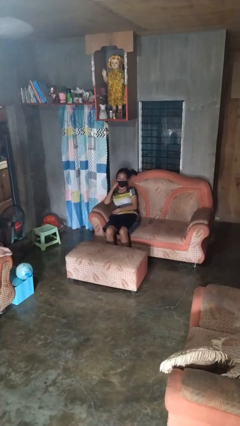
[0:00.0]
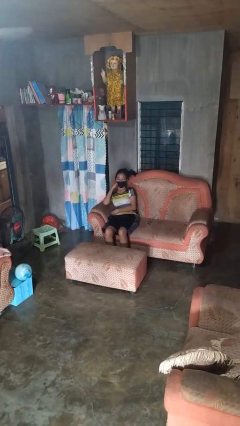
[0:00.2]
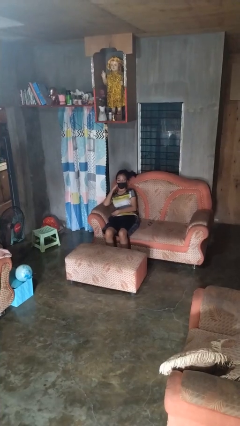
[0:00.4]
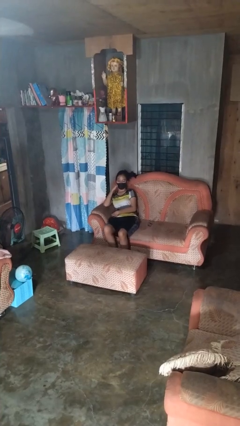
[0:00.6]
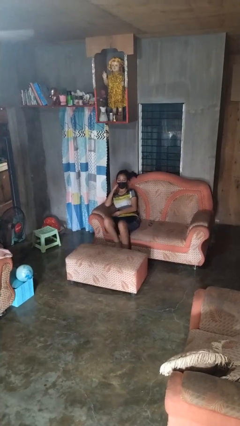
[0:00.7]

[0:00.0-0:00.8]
person puts feet up

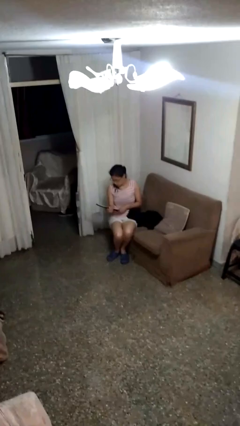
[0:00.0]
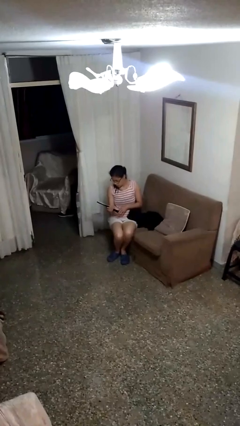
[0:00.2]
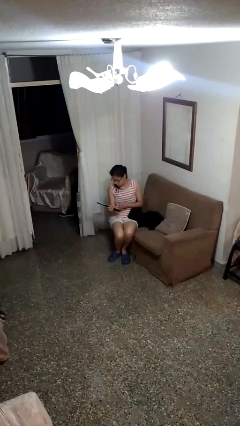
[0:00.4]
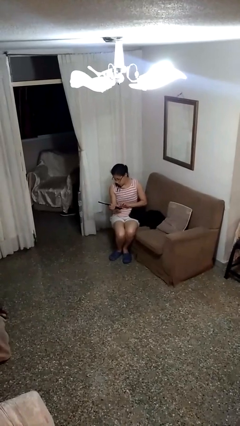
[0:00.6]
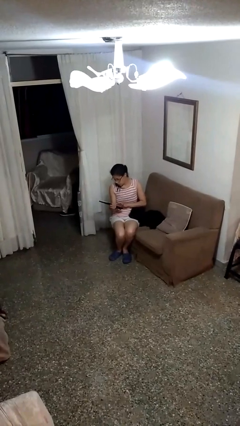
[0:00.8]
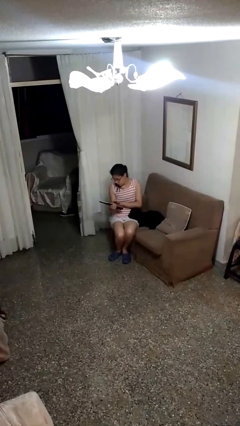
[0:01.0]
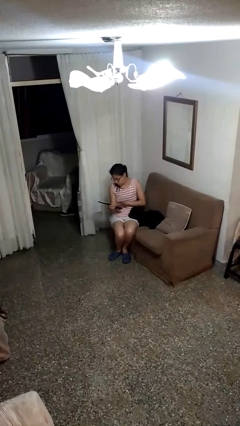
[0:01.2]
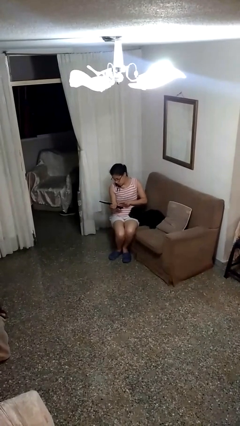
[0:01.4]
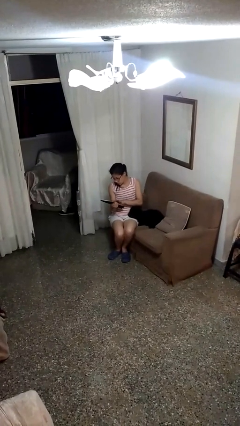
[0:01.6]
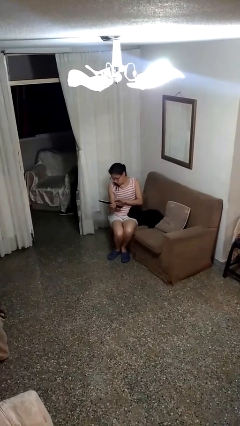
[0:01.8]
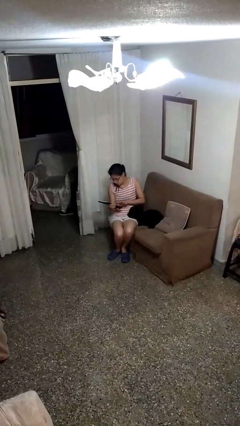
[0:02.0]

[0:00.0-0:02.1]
person interacts with tablet

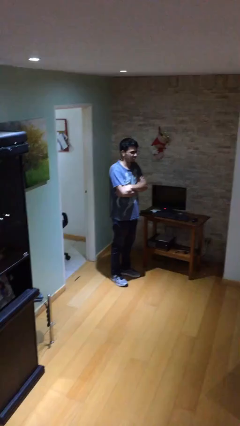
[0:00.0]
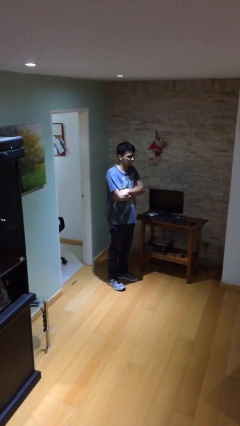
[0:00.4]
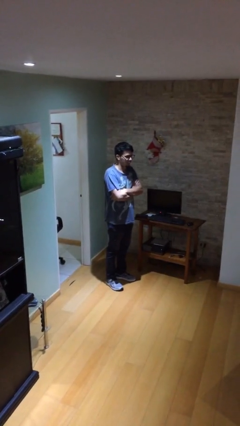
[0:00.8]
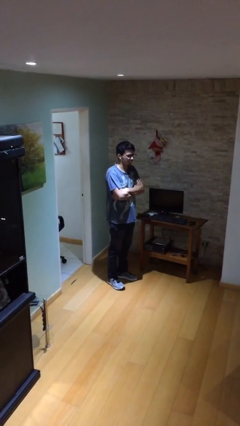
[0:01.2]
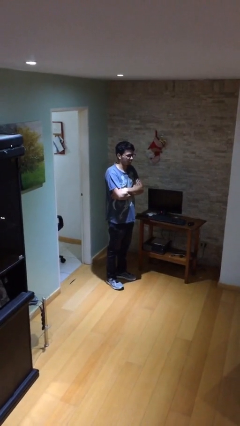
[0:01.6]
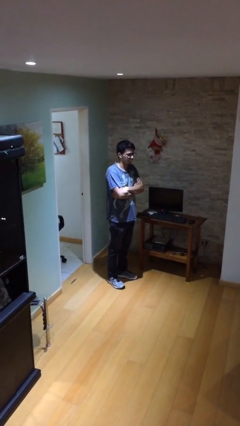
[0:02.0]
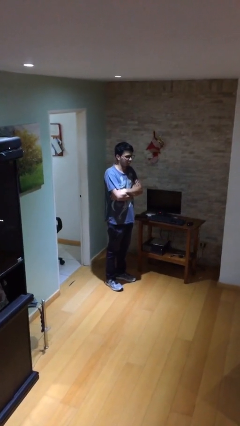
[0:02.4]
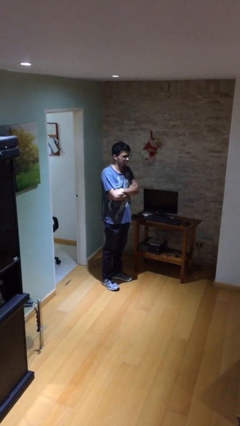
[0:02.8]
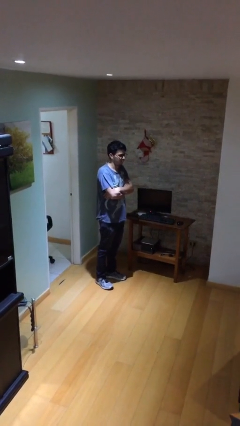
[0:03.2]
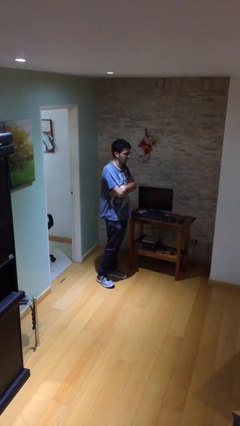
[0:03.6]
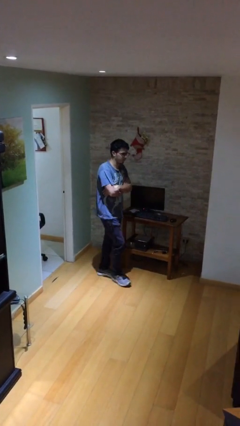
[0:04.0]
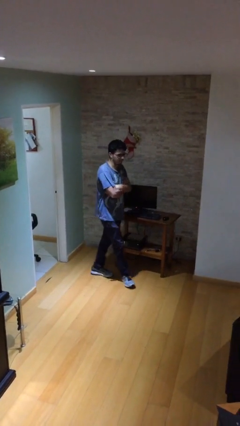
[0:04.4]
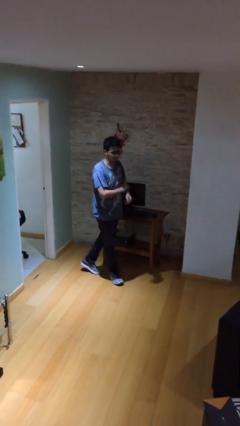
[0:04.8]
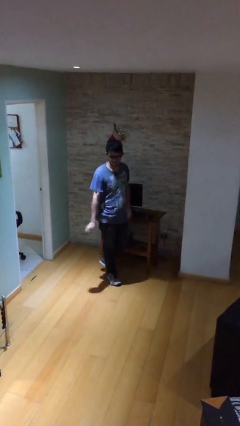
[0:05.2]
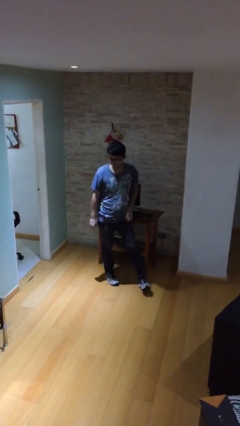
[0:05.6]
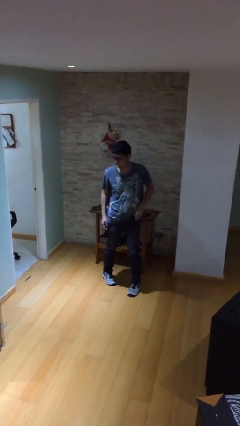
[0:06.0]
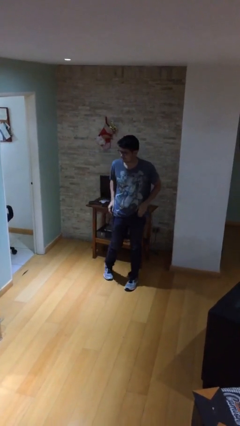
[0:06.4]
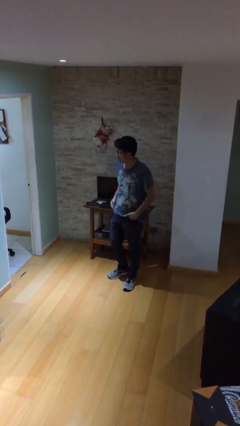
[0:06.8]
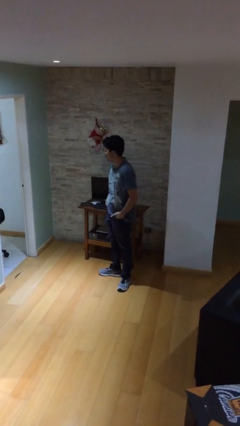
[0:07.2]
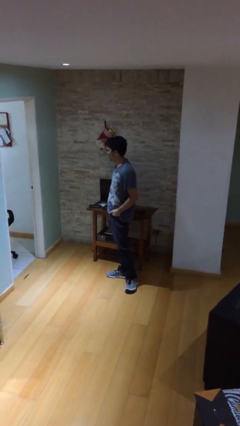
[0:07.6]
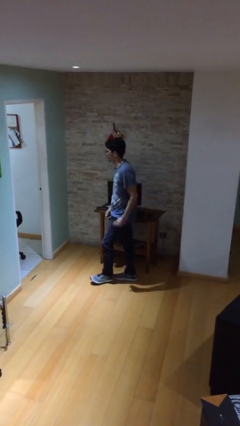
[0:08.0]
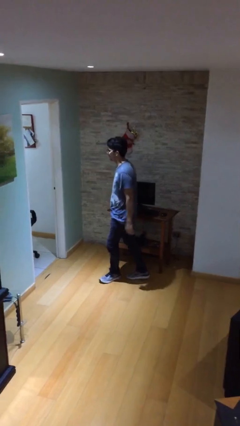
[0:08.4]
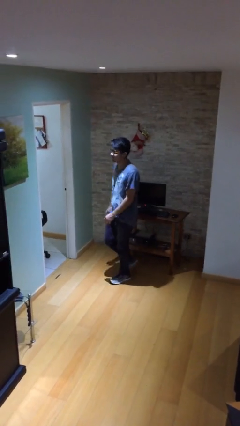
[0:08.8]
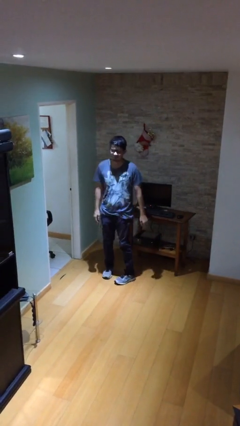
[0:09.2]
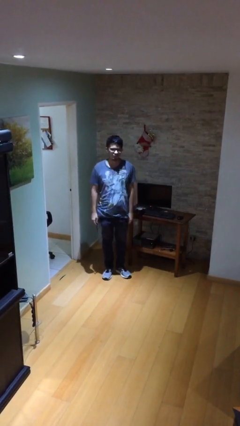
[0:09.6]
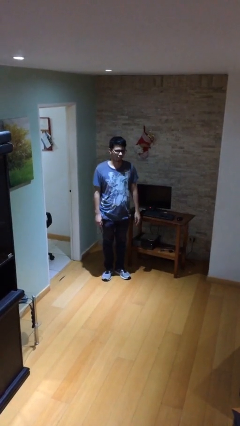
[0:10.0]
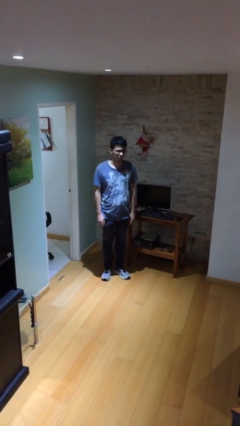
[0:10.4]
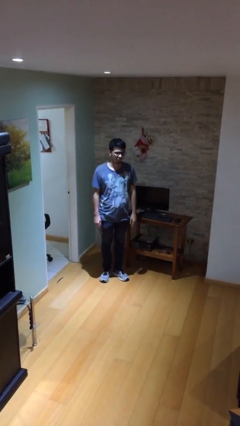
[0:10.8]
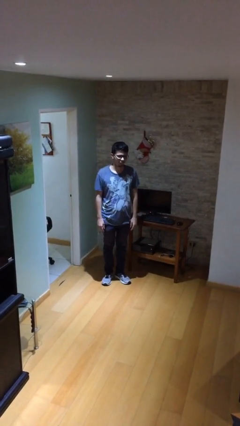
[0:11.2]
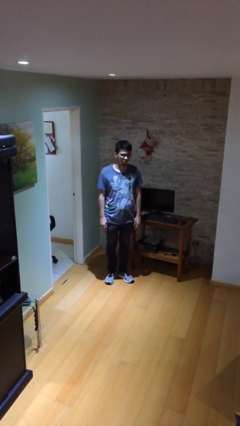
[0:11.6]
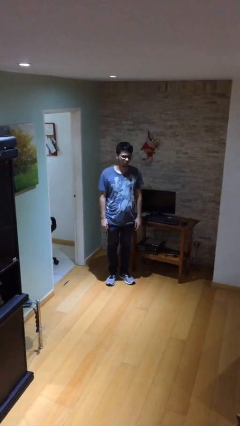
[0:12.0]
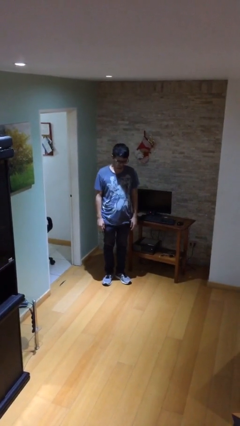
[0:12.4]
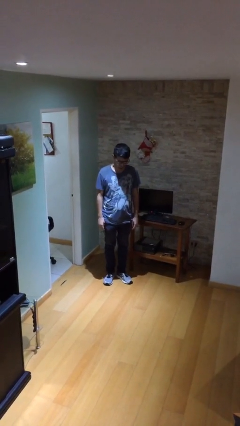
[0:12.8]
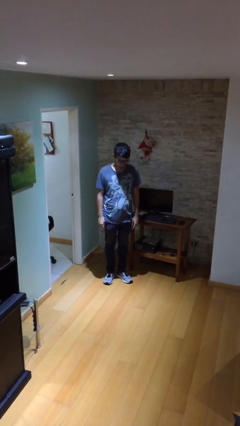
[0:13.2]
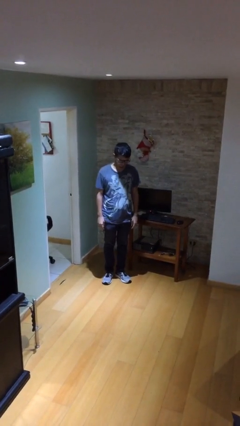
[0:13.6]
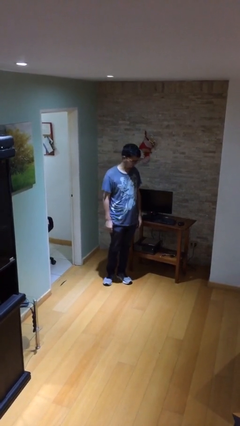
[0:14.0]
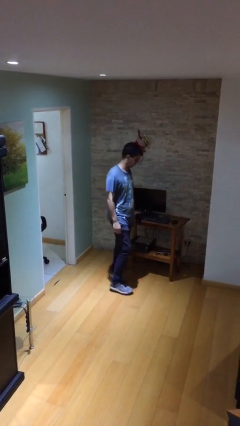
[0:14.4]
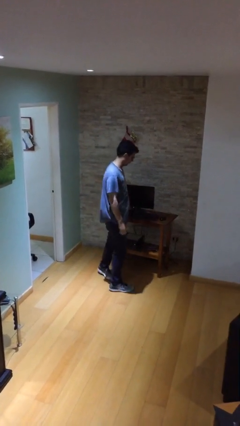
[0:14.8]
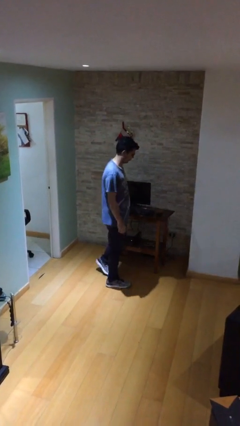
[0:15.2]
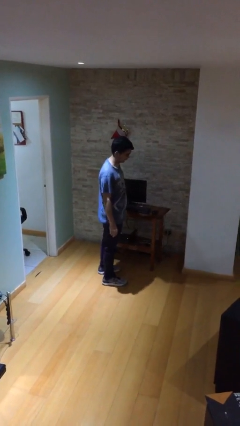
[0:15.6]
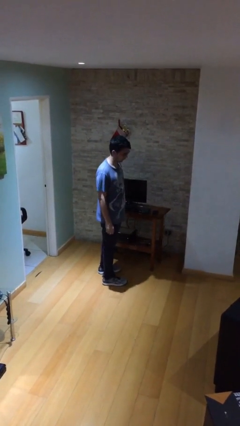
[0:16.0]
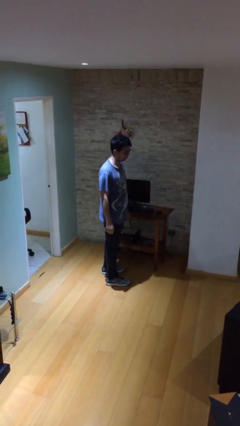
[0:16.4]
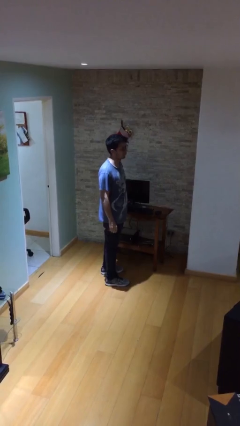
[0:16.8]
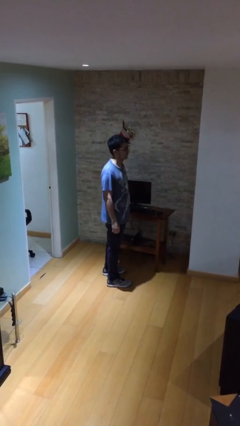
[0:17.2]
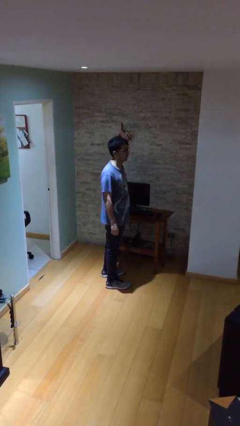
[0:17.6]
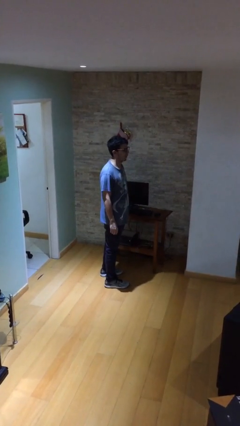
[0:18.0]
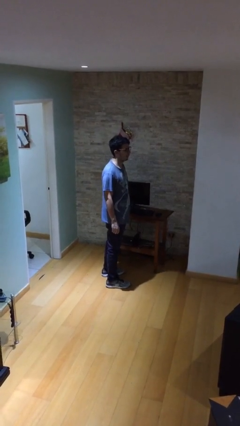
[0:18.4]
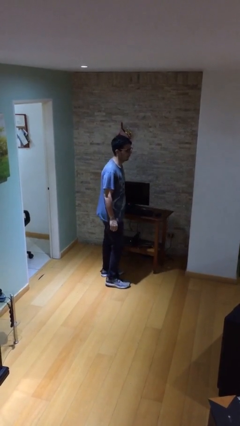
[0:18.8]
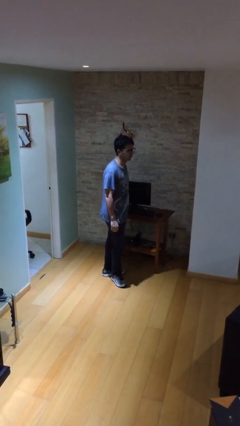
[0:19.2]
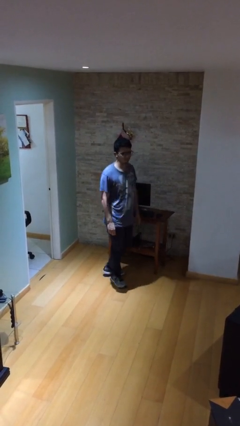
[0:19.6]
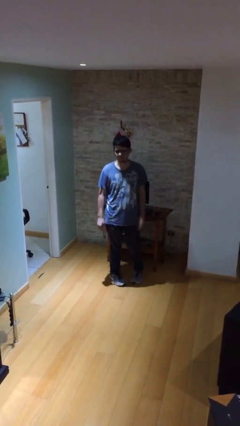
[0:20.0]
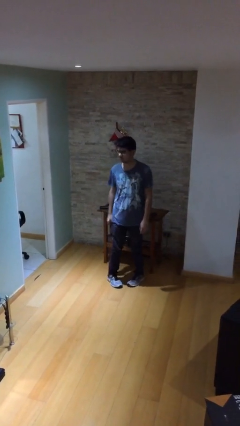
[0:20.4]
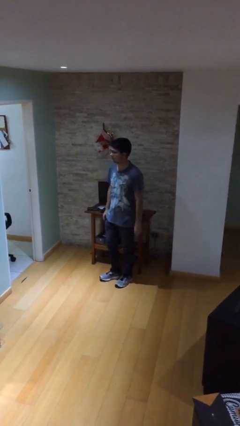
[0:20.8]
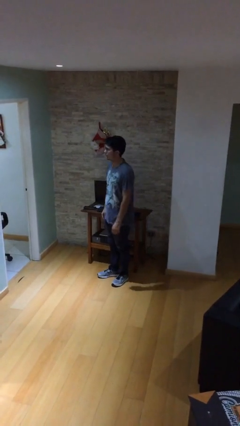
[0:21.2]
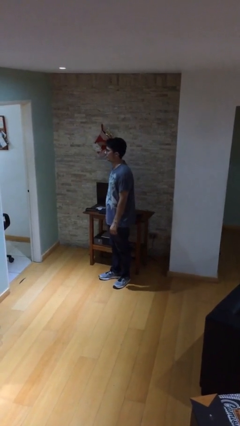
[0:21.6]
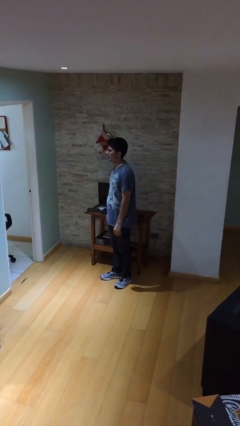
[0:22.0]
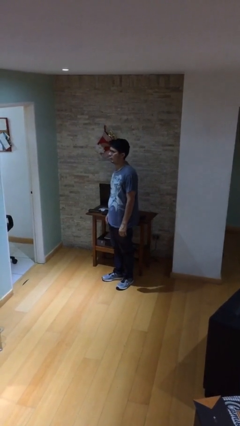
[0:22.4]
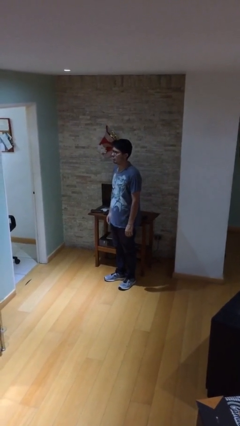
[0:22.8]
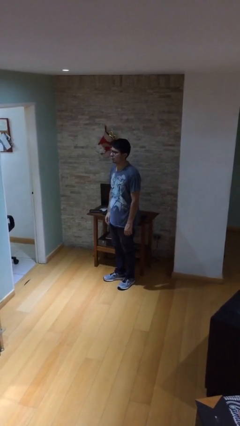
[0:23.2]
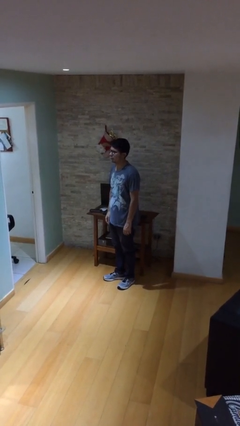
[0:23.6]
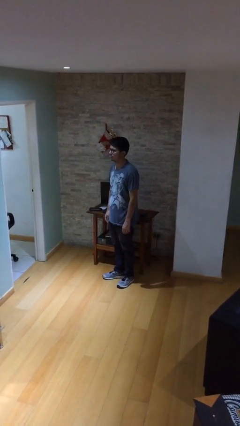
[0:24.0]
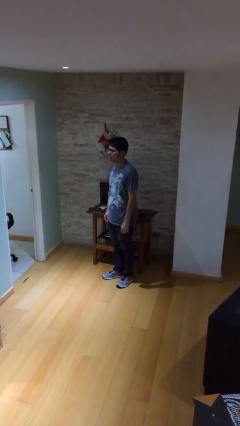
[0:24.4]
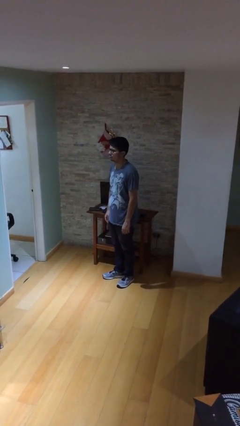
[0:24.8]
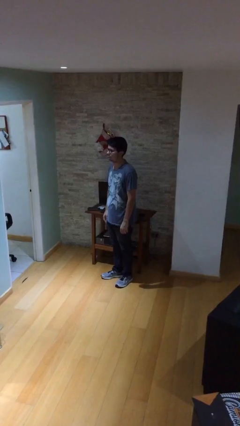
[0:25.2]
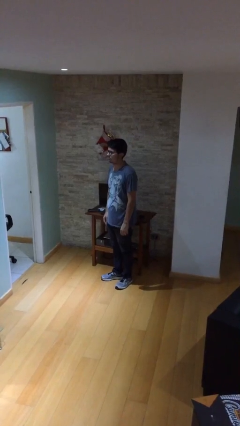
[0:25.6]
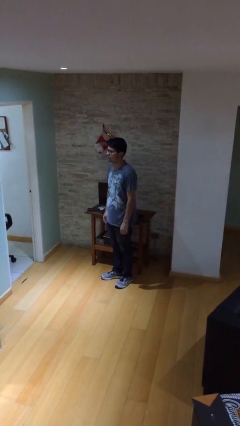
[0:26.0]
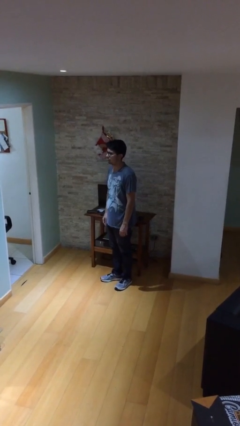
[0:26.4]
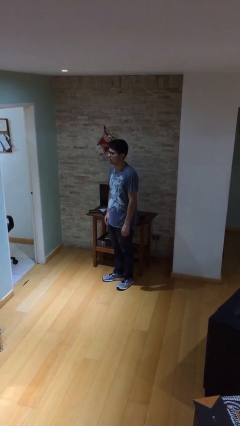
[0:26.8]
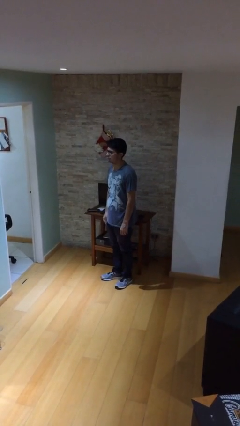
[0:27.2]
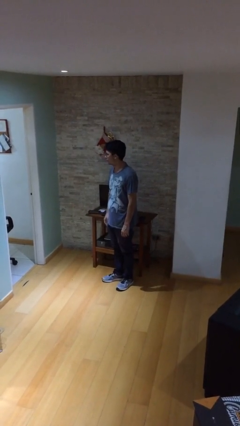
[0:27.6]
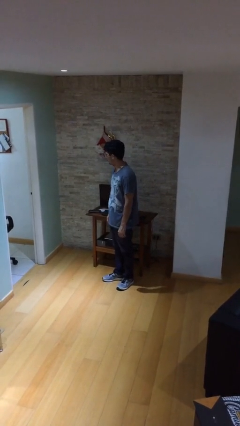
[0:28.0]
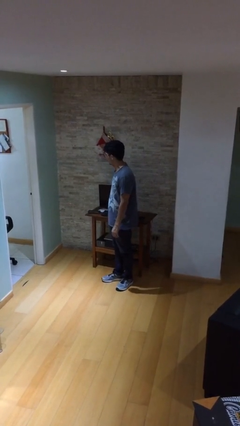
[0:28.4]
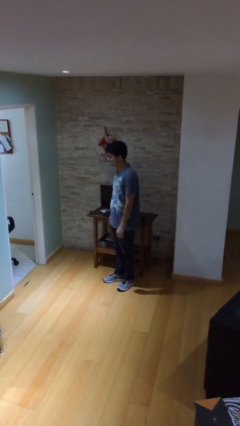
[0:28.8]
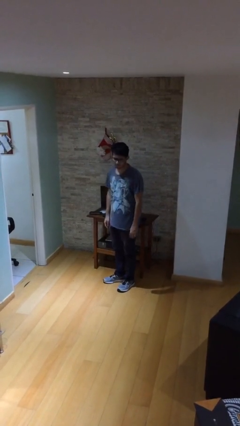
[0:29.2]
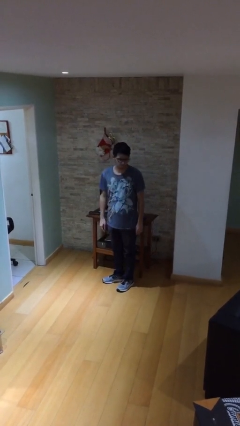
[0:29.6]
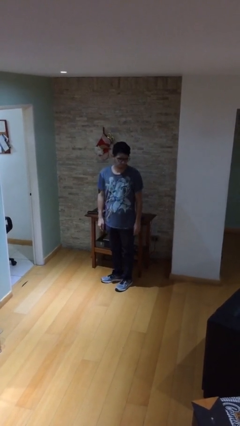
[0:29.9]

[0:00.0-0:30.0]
person walks

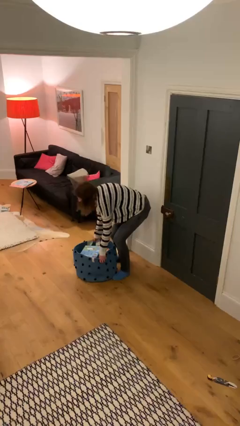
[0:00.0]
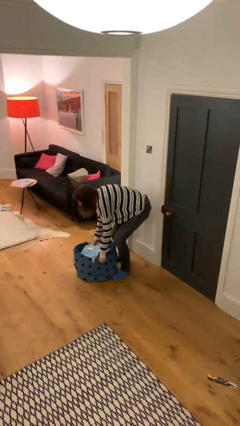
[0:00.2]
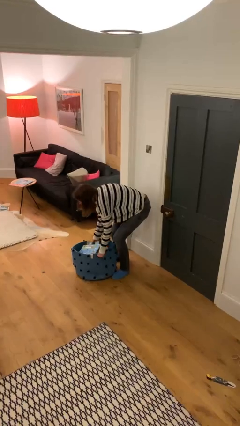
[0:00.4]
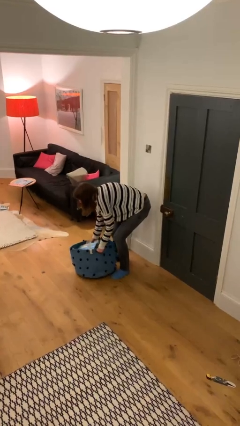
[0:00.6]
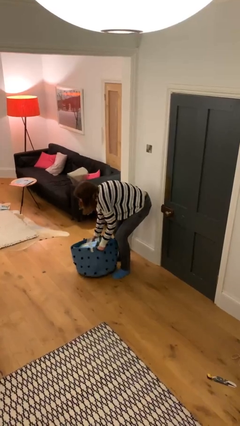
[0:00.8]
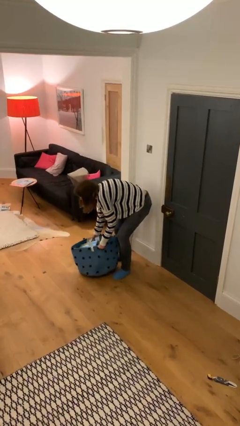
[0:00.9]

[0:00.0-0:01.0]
person picks up object from floor
